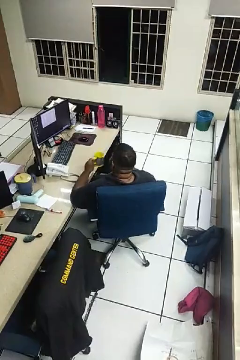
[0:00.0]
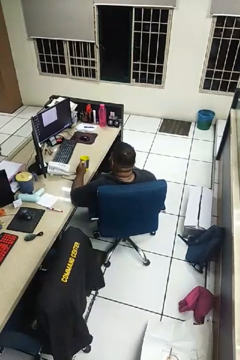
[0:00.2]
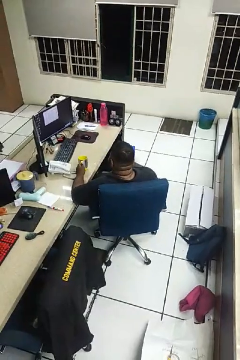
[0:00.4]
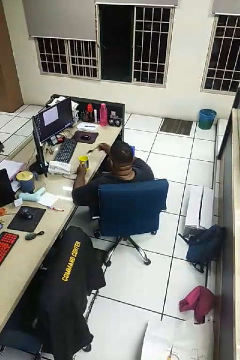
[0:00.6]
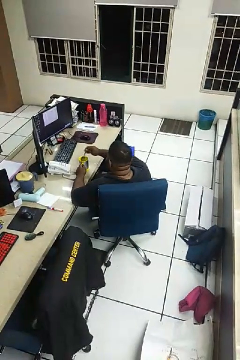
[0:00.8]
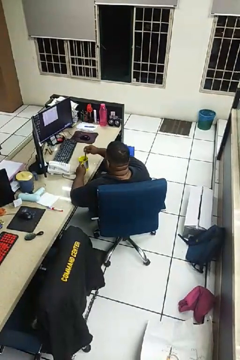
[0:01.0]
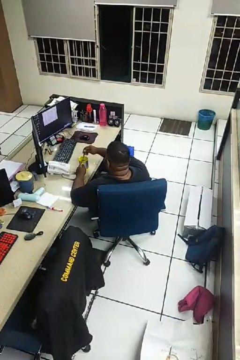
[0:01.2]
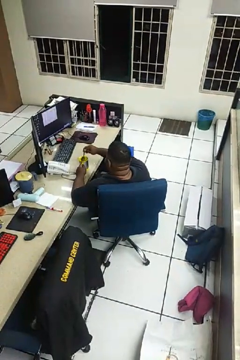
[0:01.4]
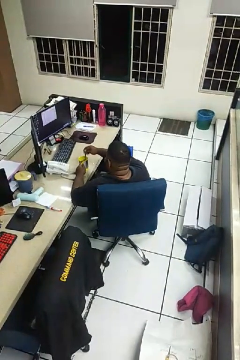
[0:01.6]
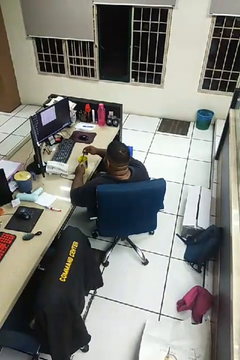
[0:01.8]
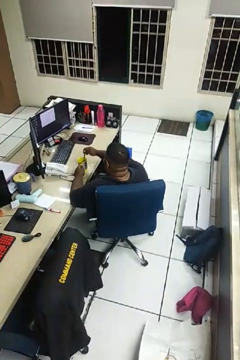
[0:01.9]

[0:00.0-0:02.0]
person stirs mug

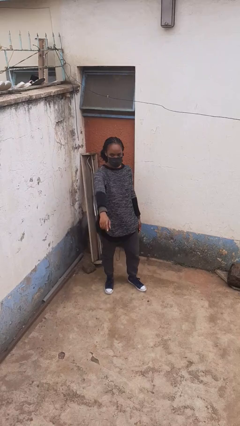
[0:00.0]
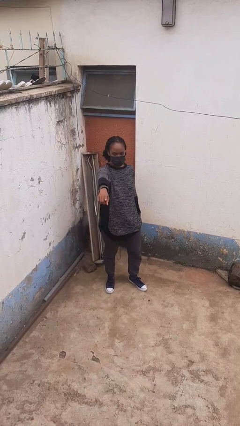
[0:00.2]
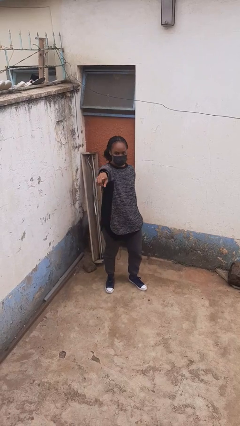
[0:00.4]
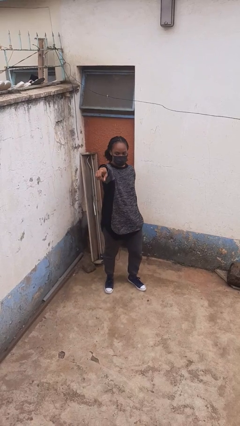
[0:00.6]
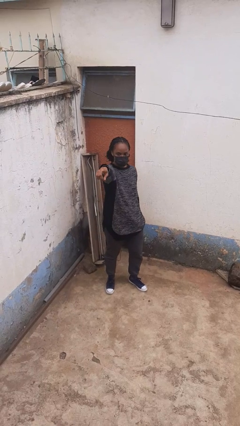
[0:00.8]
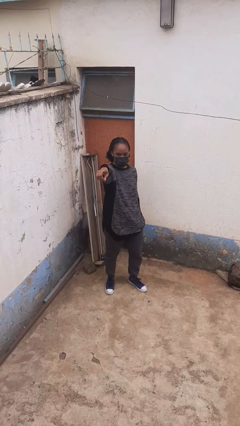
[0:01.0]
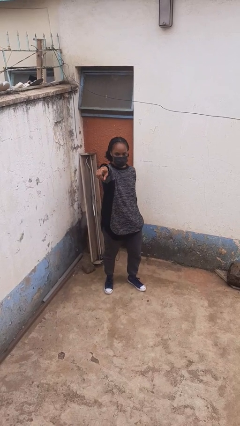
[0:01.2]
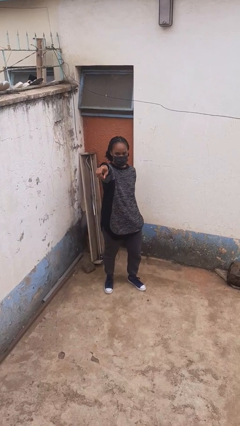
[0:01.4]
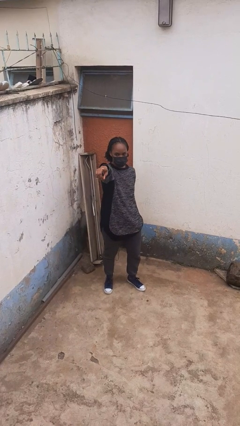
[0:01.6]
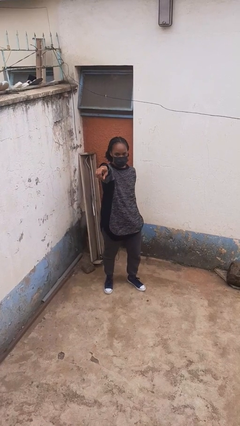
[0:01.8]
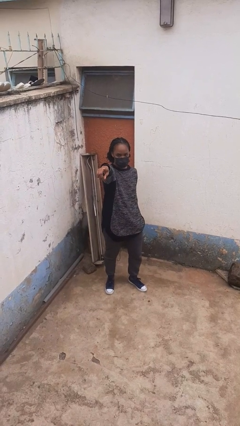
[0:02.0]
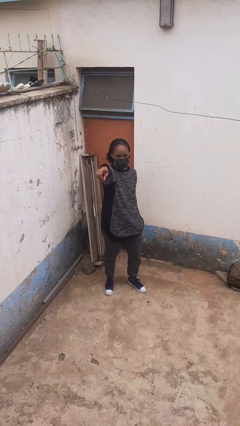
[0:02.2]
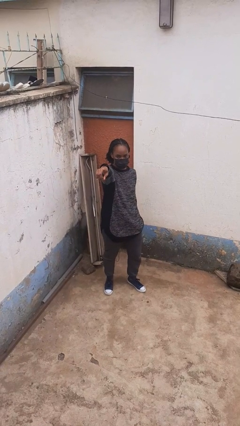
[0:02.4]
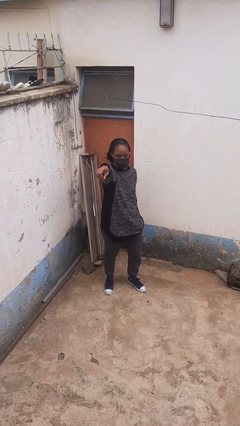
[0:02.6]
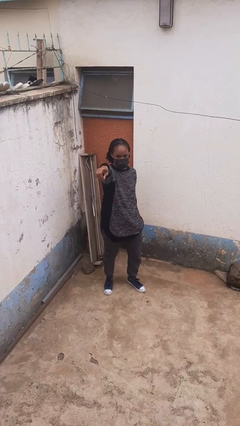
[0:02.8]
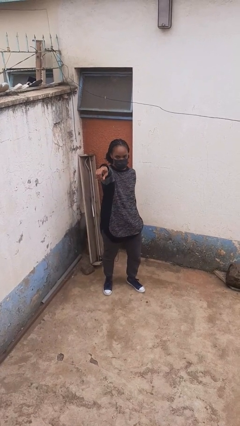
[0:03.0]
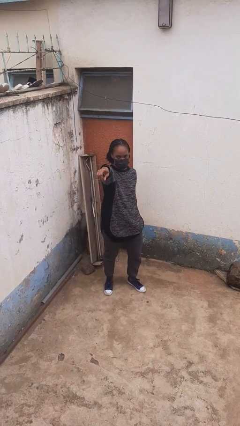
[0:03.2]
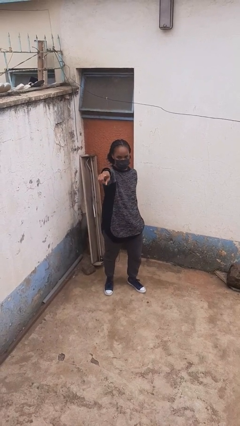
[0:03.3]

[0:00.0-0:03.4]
person points at person

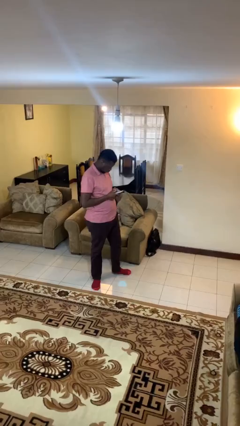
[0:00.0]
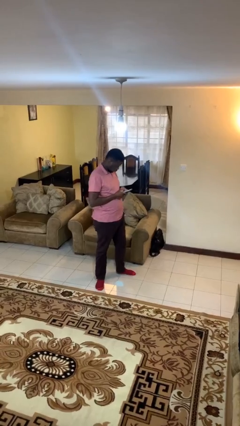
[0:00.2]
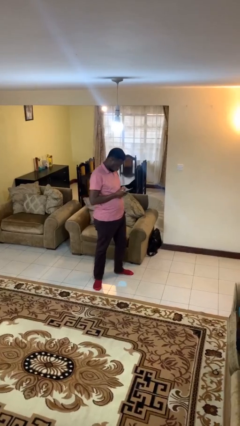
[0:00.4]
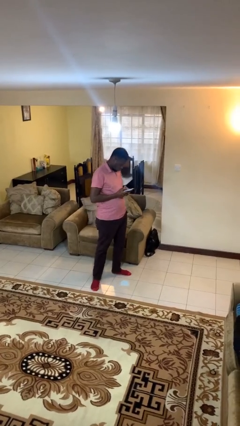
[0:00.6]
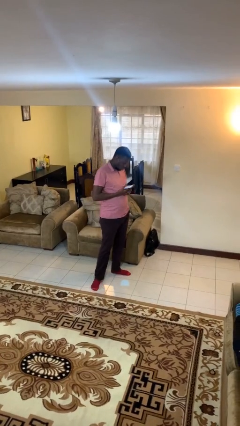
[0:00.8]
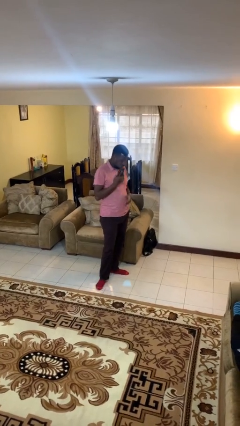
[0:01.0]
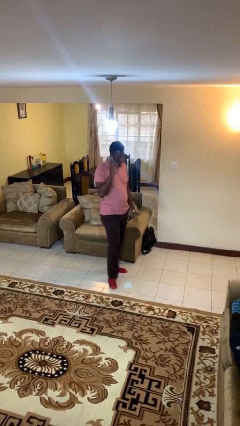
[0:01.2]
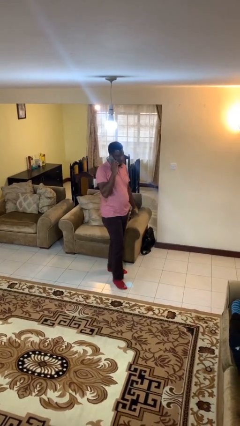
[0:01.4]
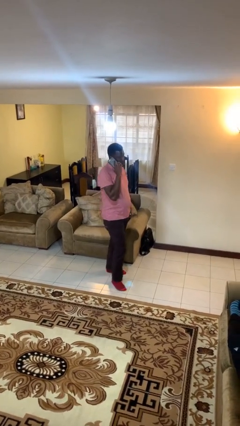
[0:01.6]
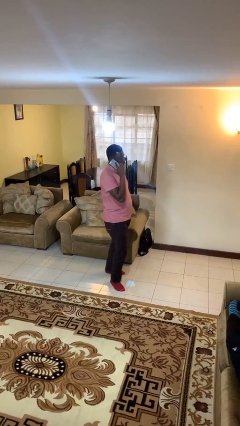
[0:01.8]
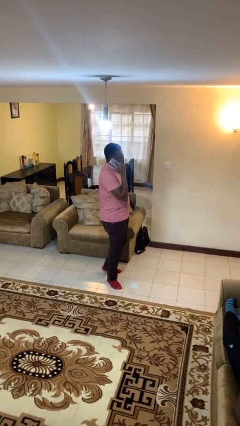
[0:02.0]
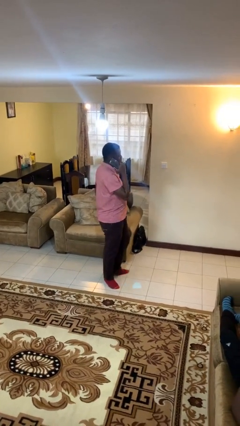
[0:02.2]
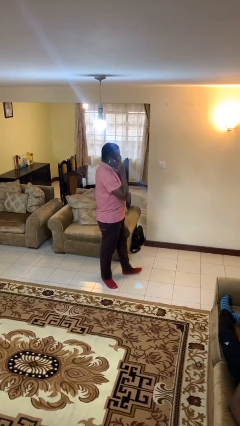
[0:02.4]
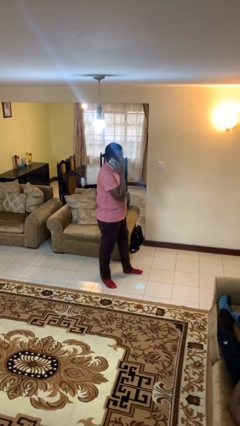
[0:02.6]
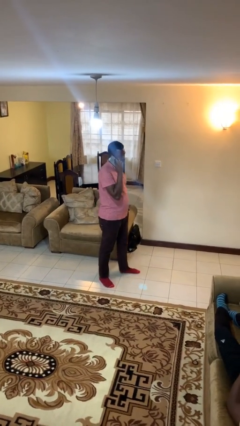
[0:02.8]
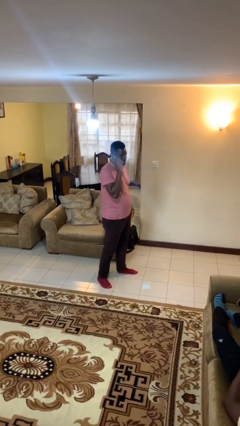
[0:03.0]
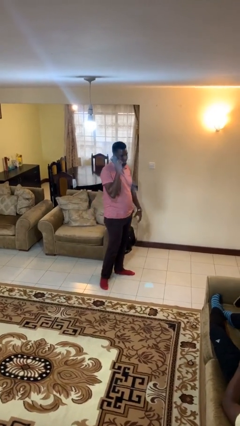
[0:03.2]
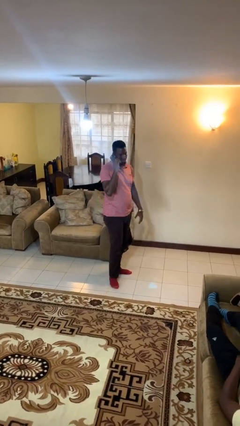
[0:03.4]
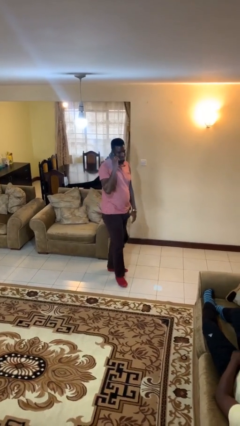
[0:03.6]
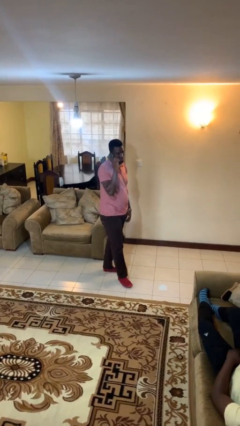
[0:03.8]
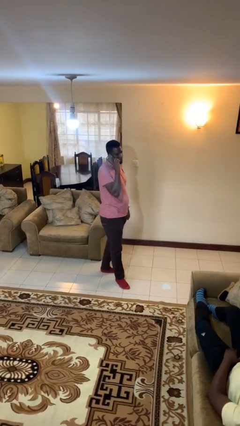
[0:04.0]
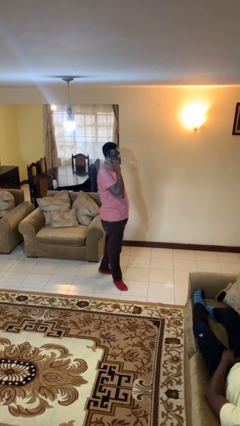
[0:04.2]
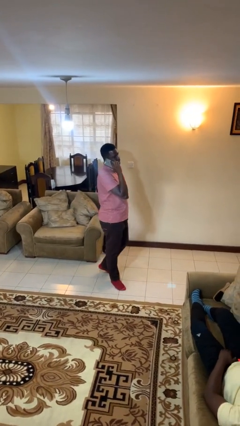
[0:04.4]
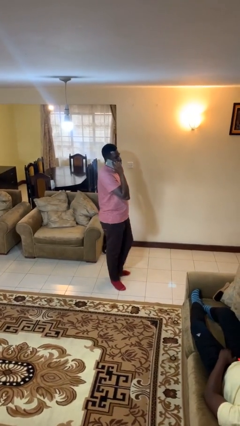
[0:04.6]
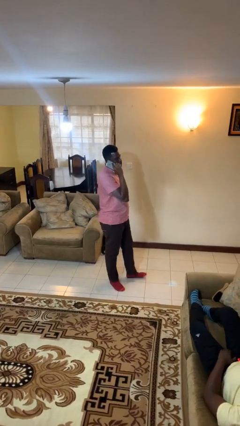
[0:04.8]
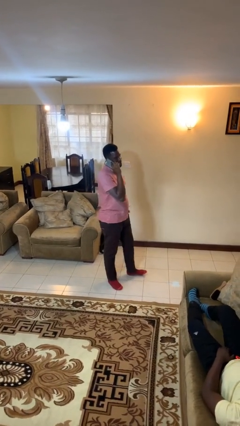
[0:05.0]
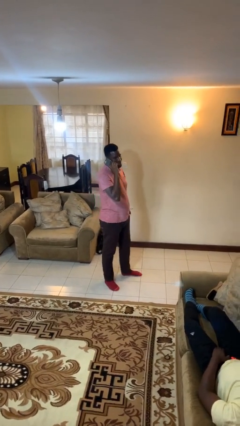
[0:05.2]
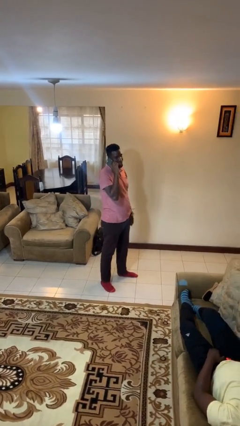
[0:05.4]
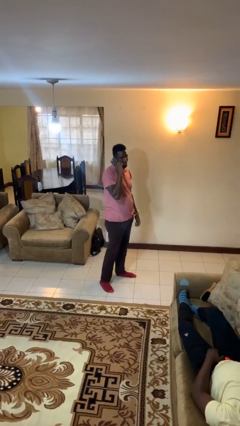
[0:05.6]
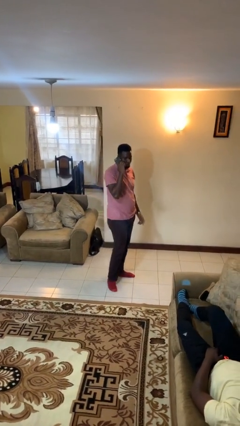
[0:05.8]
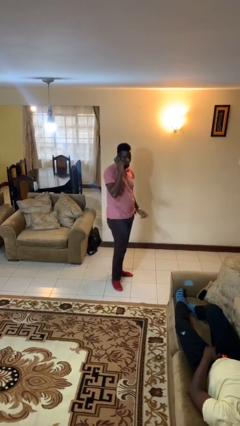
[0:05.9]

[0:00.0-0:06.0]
person talks on phone

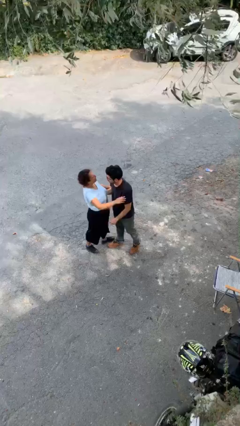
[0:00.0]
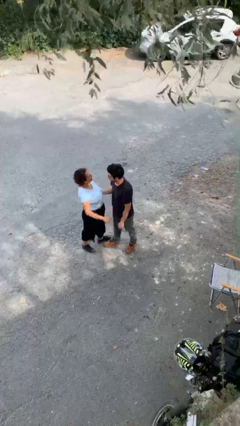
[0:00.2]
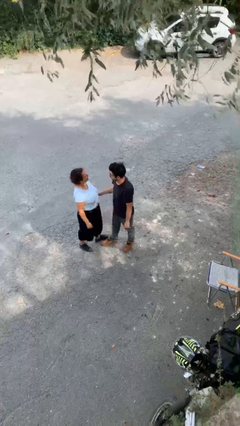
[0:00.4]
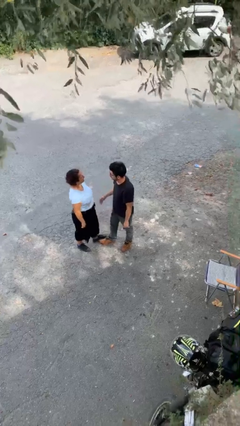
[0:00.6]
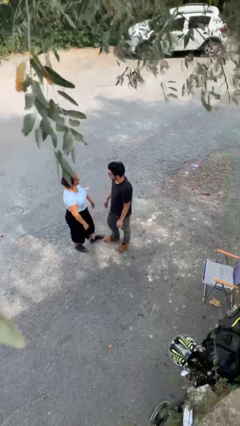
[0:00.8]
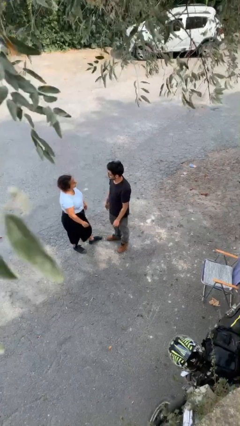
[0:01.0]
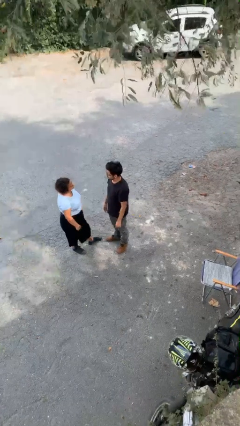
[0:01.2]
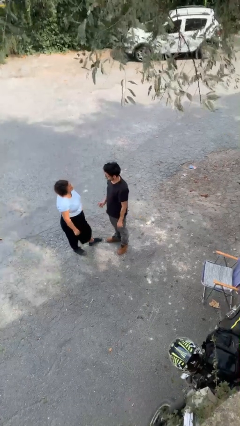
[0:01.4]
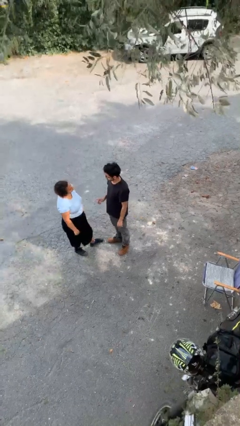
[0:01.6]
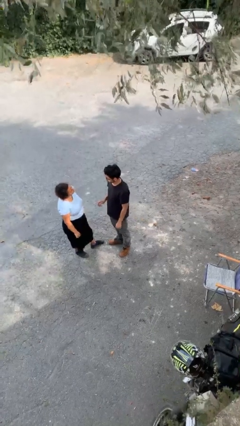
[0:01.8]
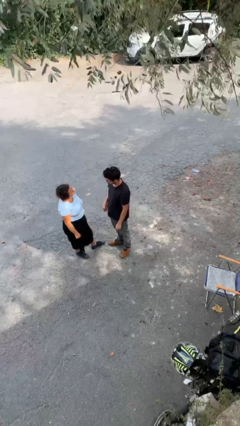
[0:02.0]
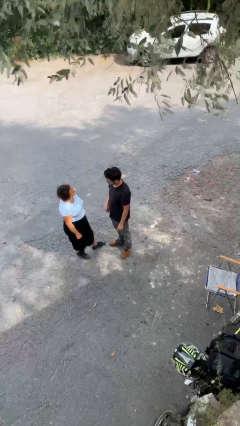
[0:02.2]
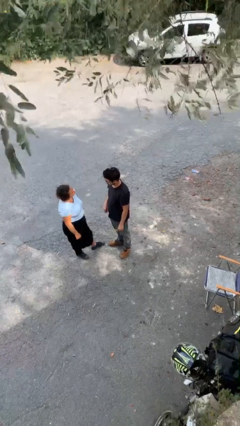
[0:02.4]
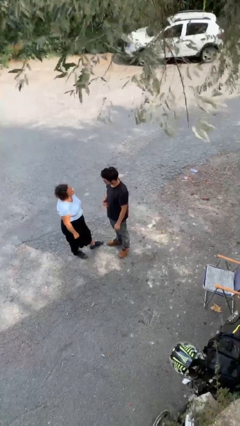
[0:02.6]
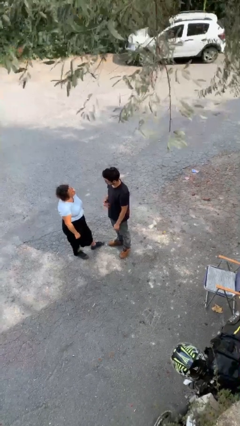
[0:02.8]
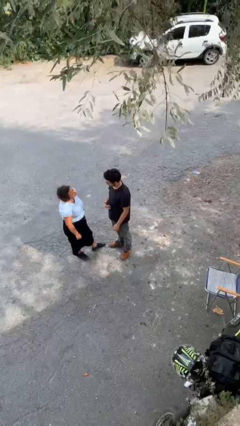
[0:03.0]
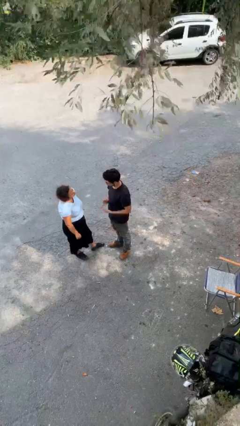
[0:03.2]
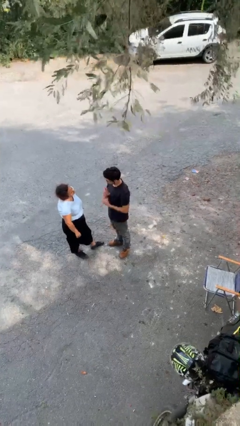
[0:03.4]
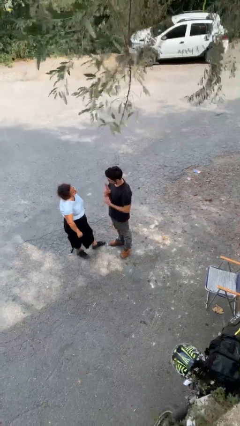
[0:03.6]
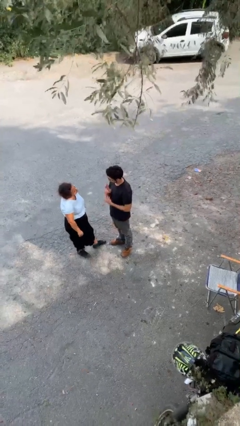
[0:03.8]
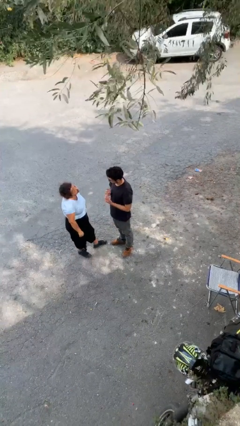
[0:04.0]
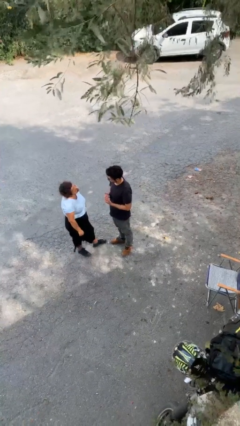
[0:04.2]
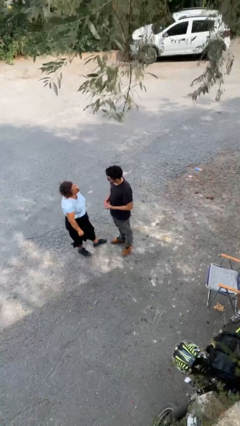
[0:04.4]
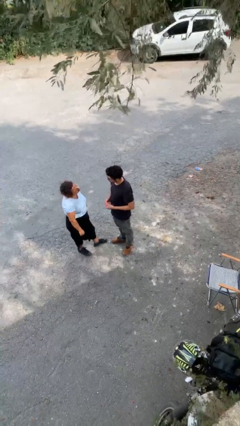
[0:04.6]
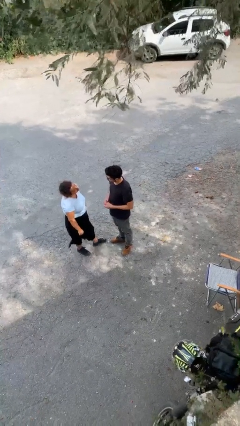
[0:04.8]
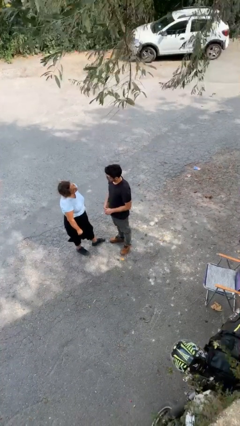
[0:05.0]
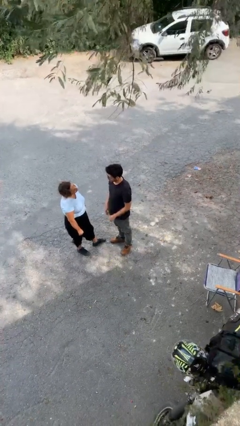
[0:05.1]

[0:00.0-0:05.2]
person talks to person

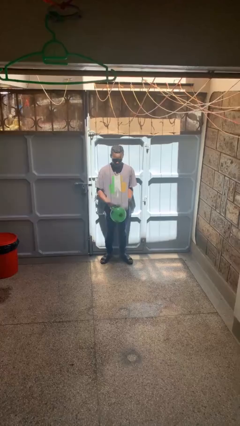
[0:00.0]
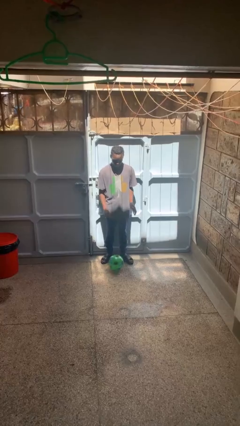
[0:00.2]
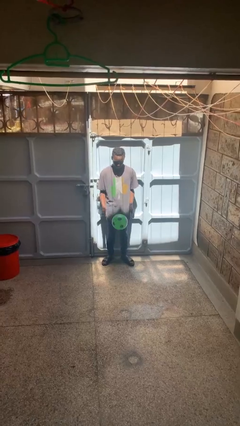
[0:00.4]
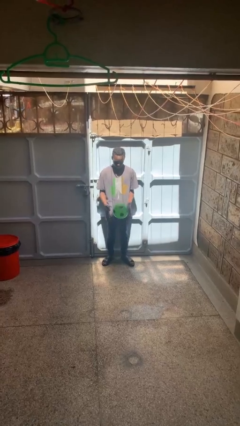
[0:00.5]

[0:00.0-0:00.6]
person bounces ball on floor

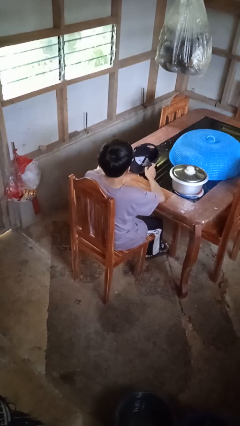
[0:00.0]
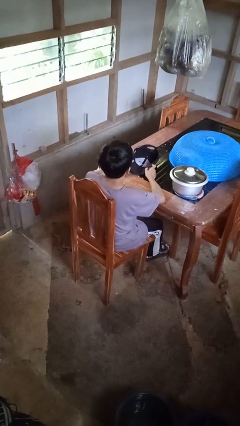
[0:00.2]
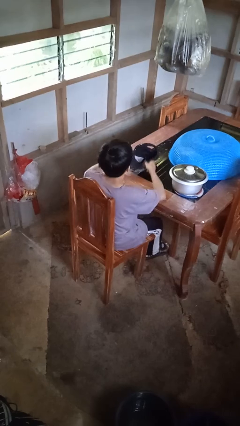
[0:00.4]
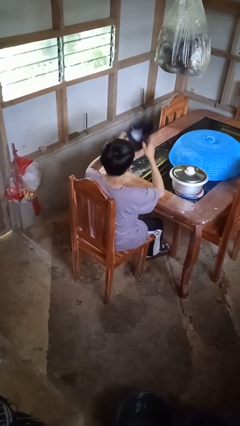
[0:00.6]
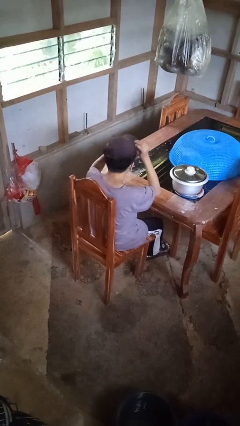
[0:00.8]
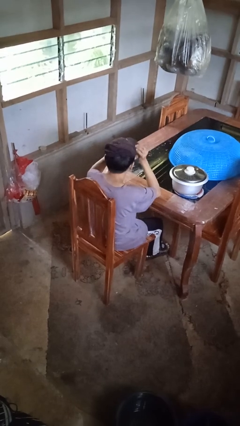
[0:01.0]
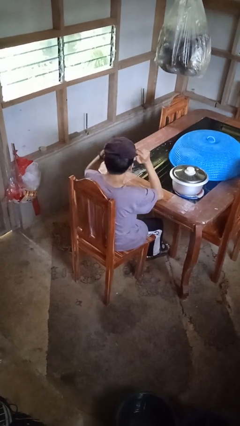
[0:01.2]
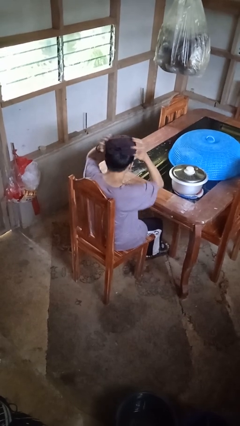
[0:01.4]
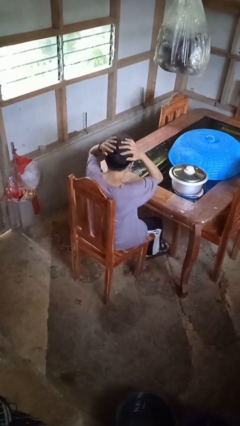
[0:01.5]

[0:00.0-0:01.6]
person puts on hat
